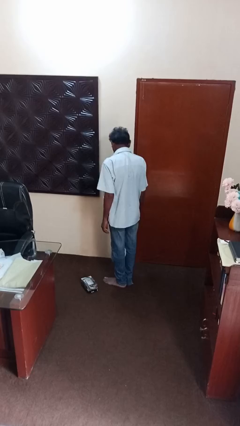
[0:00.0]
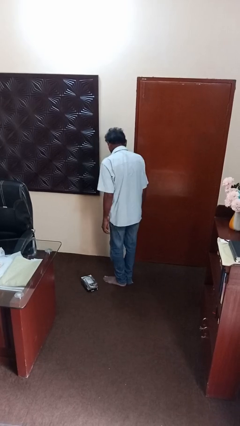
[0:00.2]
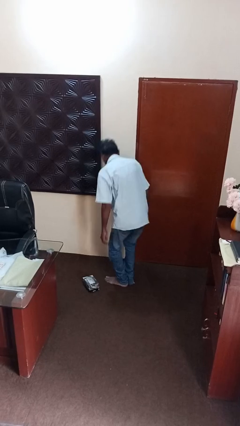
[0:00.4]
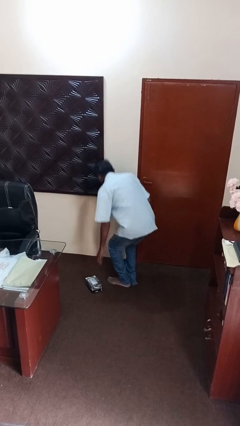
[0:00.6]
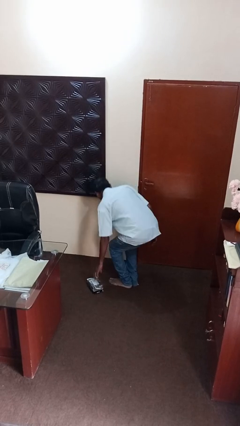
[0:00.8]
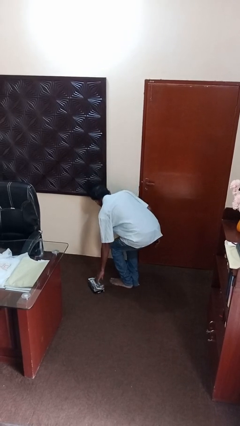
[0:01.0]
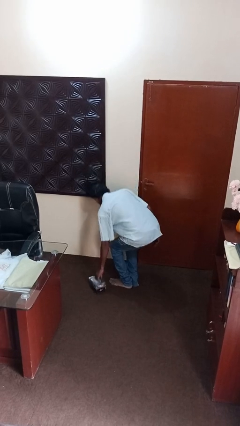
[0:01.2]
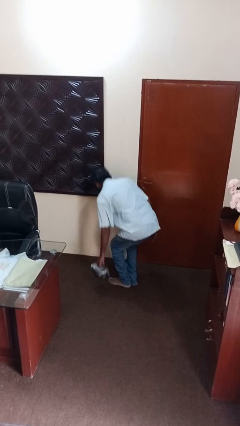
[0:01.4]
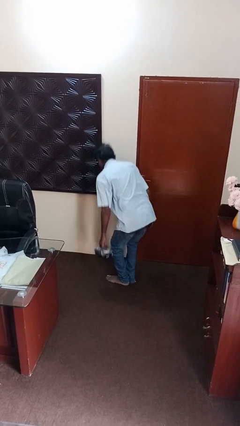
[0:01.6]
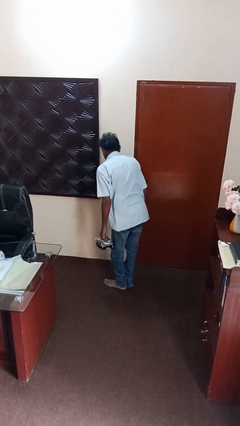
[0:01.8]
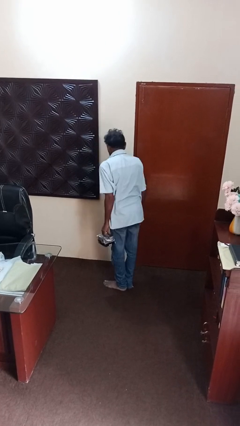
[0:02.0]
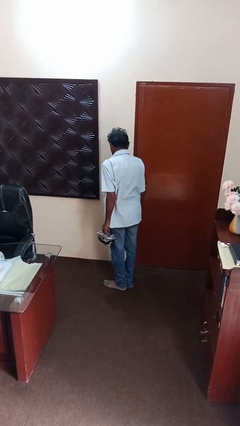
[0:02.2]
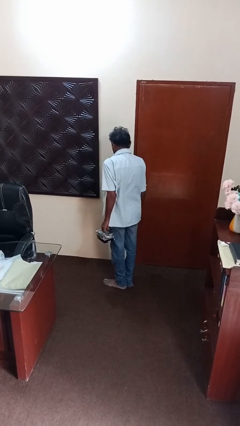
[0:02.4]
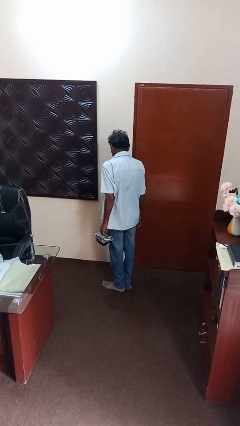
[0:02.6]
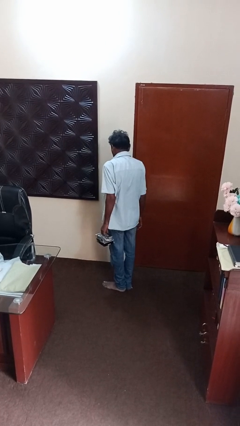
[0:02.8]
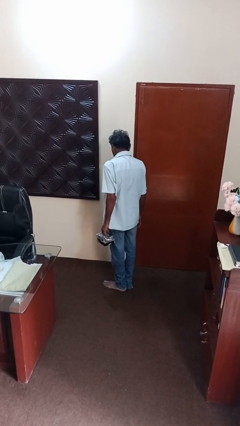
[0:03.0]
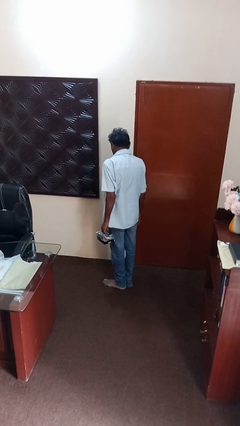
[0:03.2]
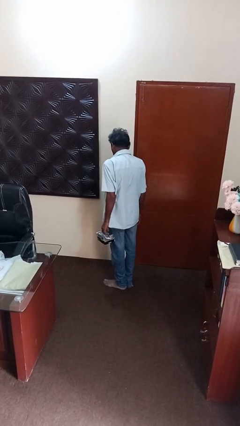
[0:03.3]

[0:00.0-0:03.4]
person picks up object from floor

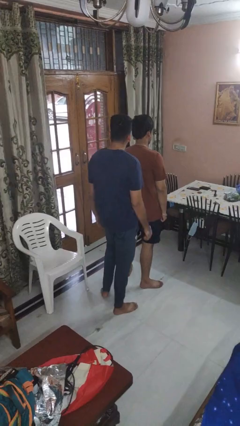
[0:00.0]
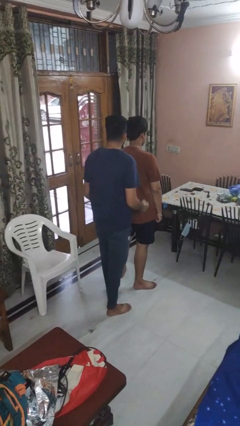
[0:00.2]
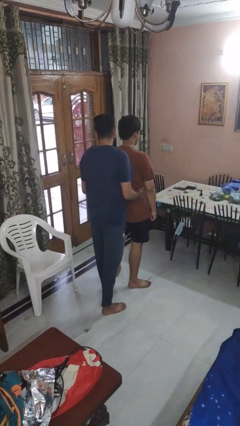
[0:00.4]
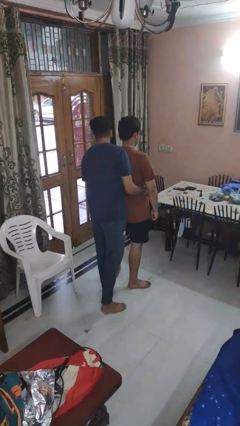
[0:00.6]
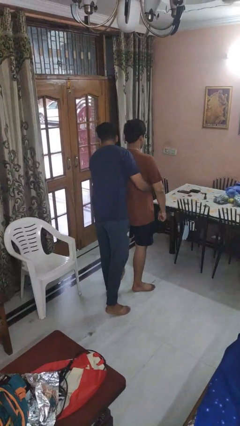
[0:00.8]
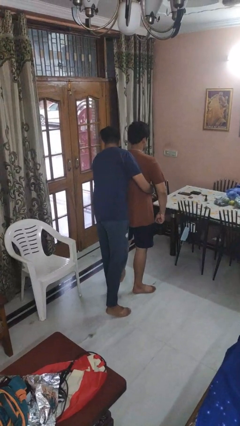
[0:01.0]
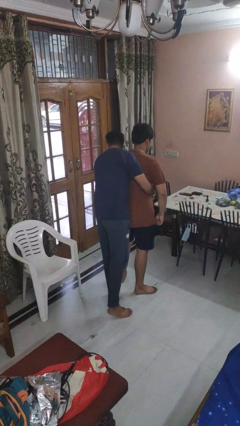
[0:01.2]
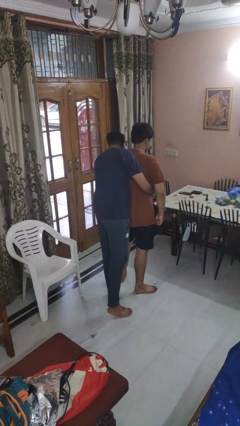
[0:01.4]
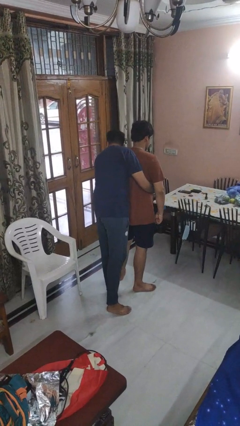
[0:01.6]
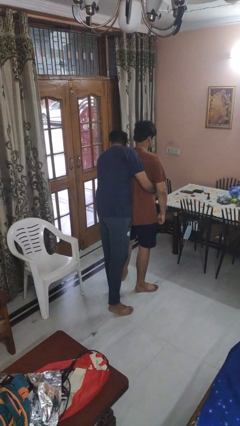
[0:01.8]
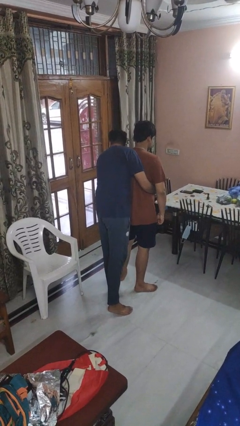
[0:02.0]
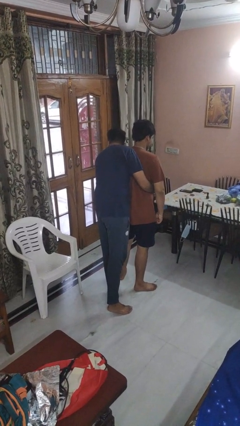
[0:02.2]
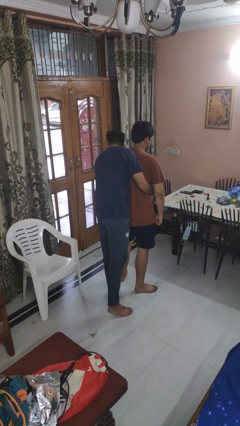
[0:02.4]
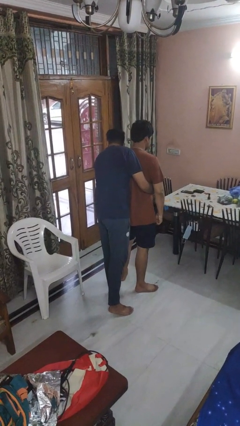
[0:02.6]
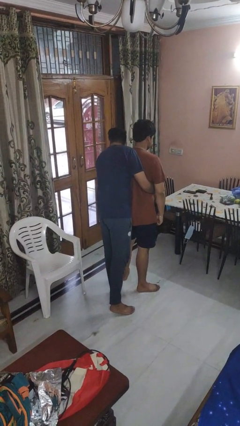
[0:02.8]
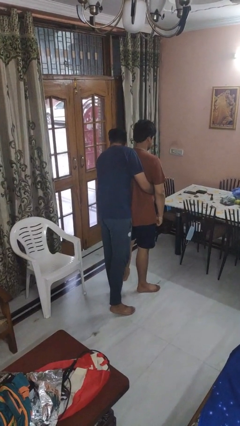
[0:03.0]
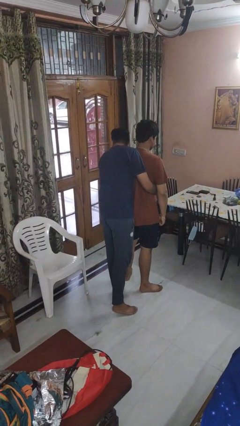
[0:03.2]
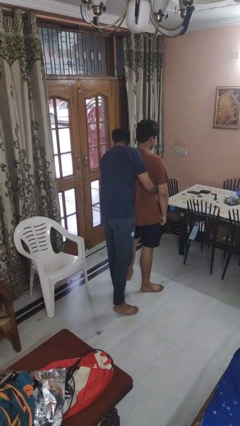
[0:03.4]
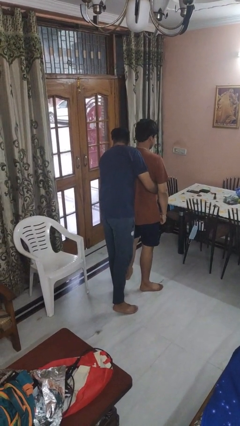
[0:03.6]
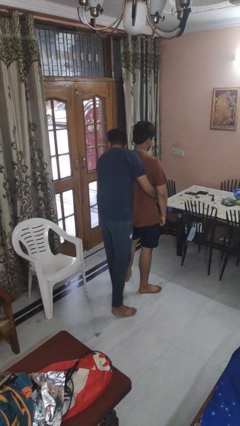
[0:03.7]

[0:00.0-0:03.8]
person hugs person from behind

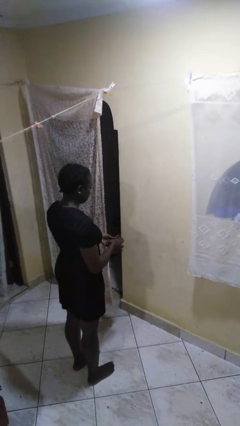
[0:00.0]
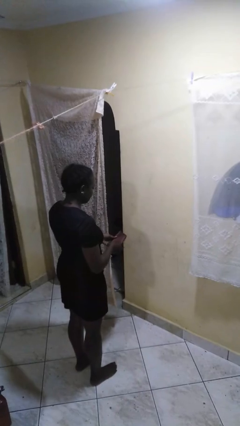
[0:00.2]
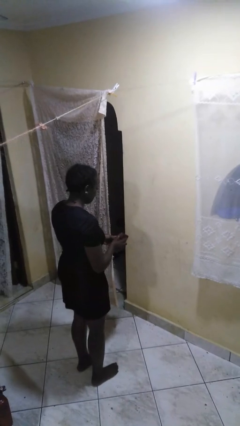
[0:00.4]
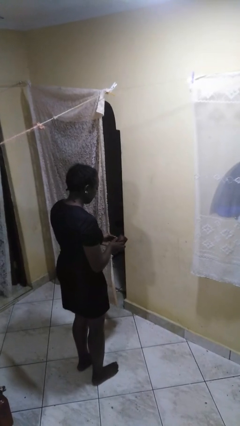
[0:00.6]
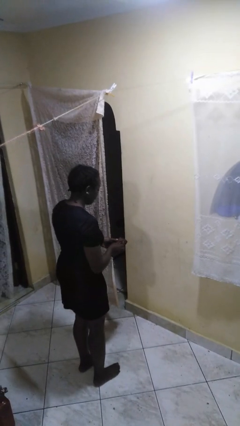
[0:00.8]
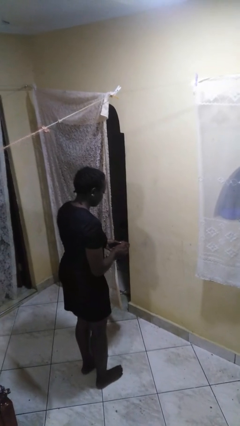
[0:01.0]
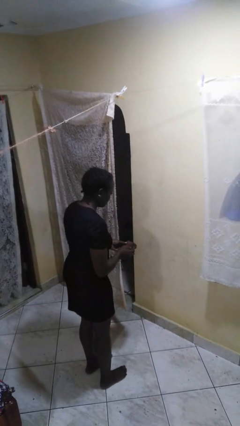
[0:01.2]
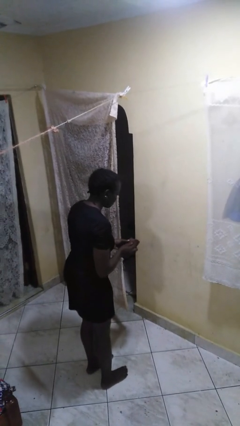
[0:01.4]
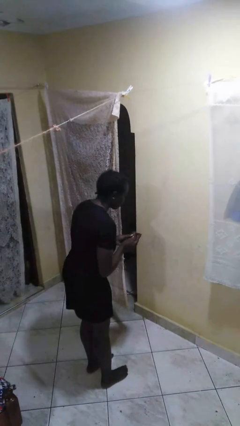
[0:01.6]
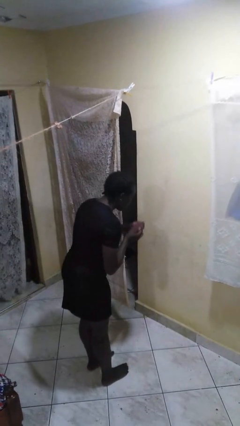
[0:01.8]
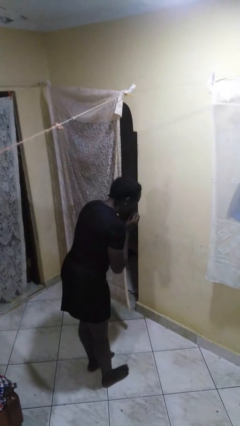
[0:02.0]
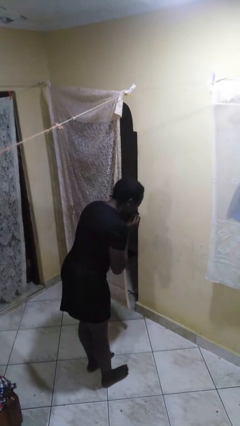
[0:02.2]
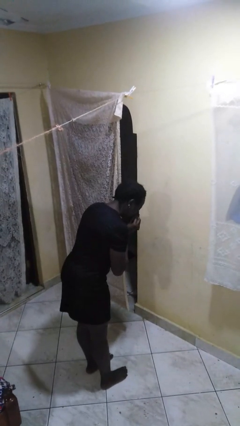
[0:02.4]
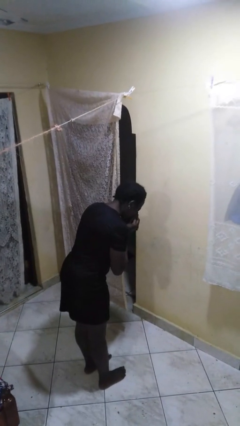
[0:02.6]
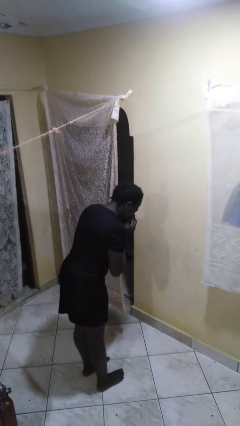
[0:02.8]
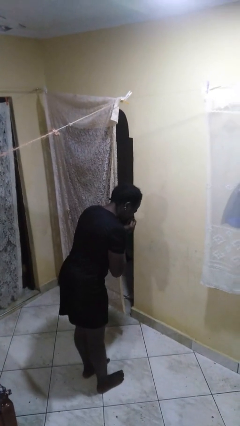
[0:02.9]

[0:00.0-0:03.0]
person blows nose

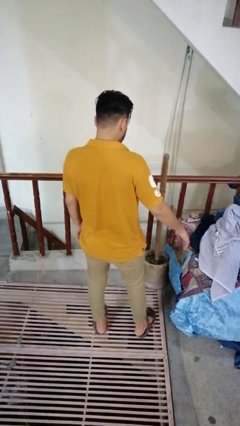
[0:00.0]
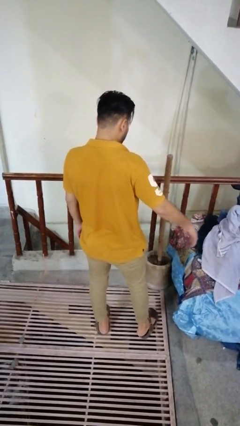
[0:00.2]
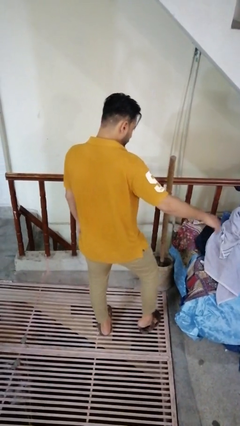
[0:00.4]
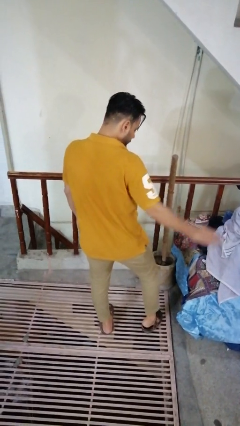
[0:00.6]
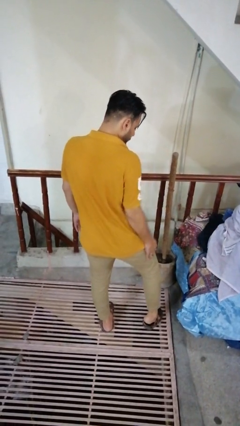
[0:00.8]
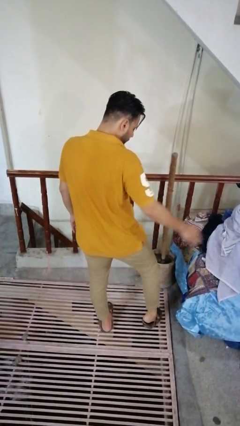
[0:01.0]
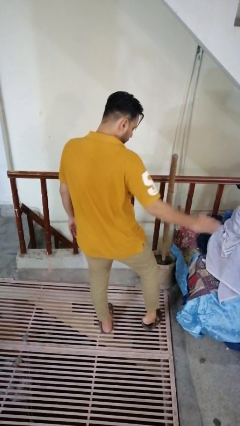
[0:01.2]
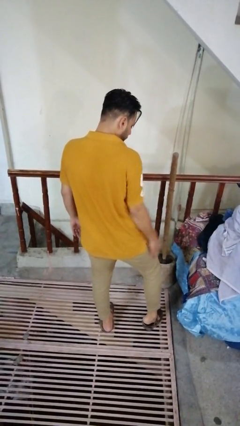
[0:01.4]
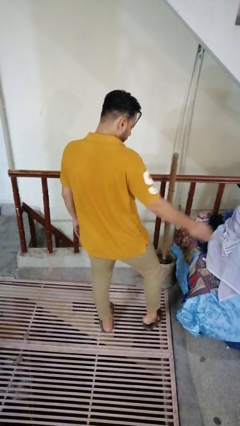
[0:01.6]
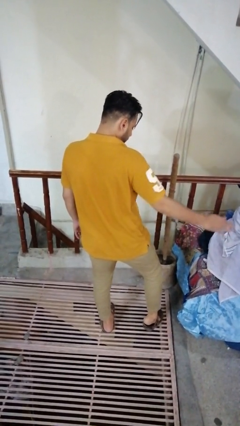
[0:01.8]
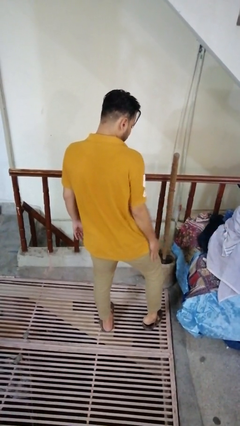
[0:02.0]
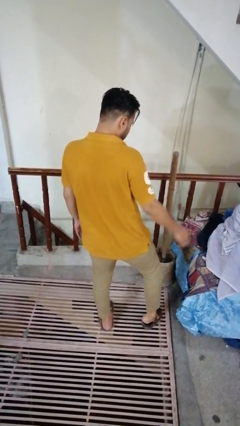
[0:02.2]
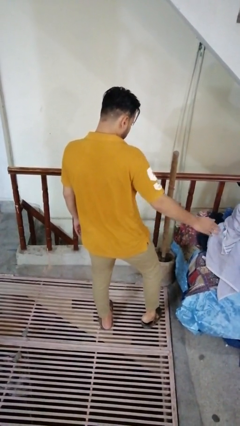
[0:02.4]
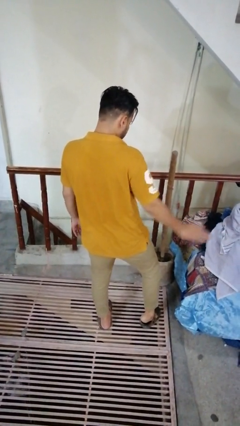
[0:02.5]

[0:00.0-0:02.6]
person slaps hands on thighs

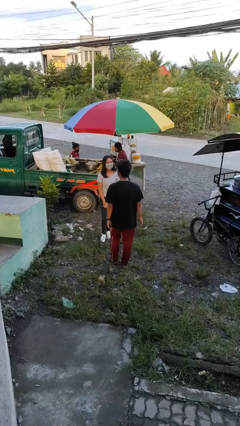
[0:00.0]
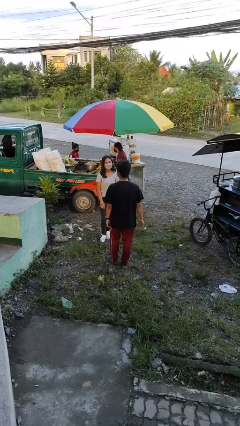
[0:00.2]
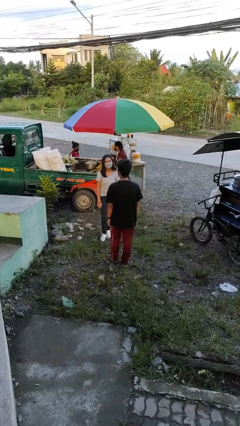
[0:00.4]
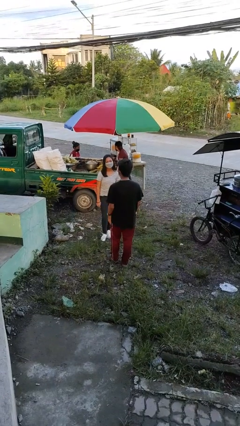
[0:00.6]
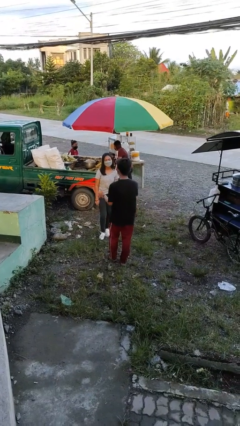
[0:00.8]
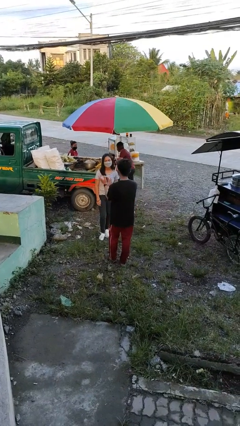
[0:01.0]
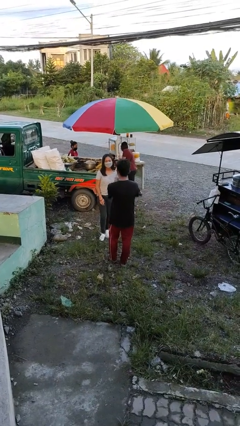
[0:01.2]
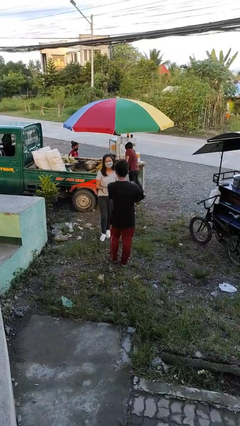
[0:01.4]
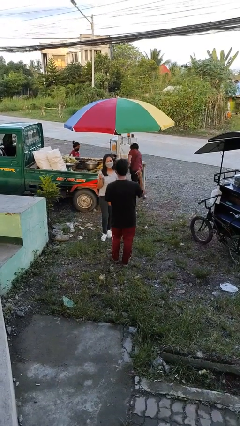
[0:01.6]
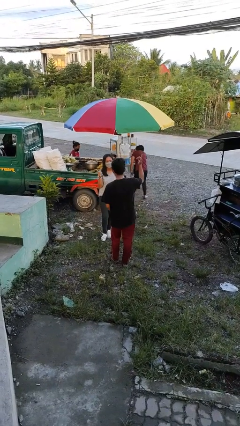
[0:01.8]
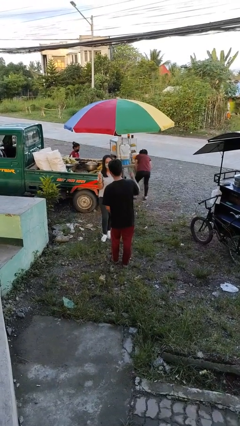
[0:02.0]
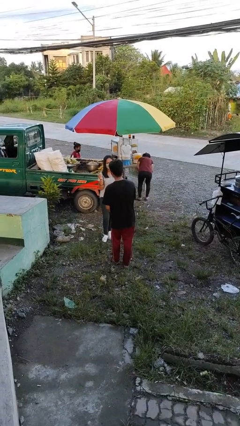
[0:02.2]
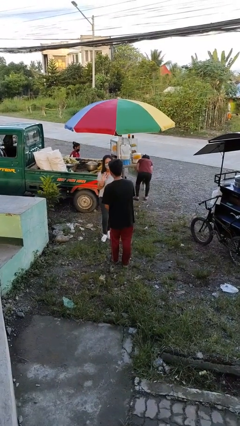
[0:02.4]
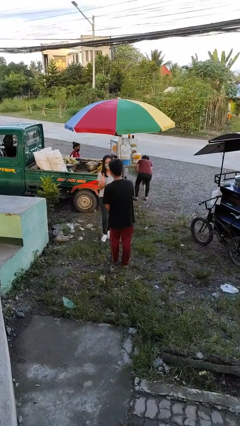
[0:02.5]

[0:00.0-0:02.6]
person talks to person

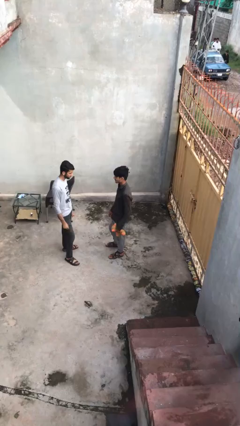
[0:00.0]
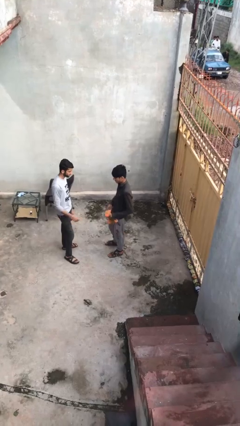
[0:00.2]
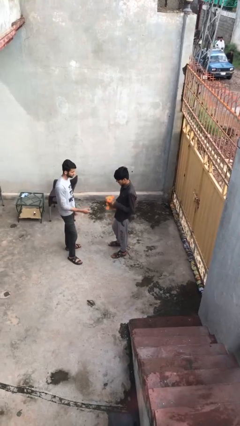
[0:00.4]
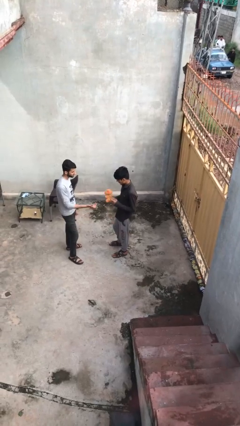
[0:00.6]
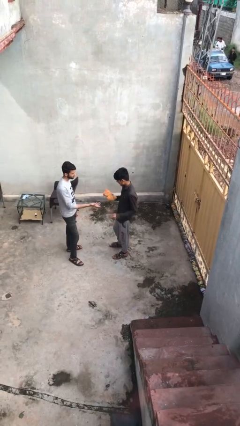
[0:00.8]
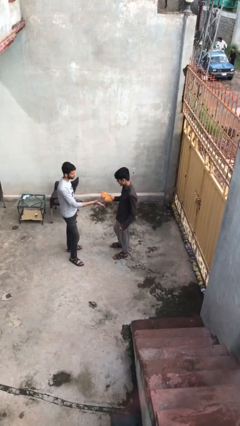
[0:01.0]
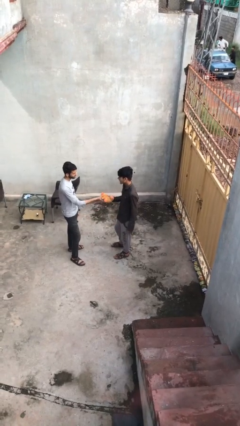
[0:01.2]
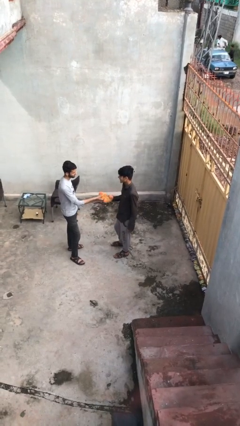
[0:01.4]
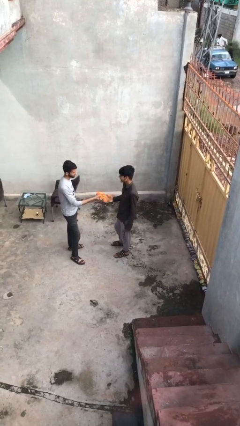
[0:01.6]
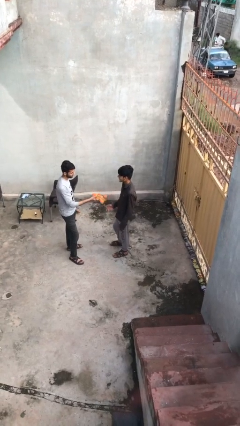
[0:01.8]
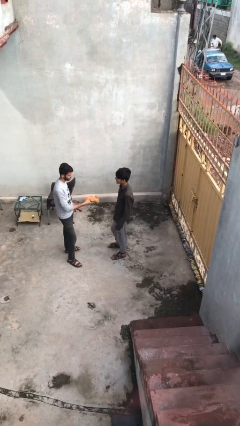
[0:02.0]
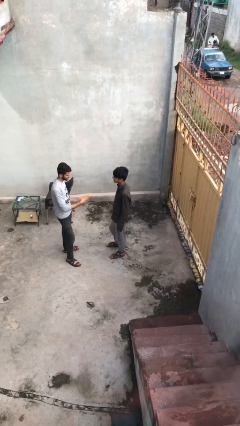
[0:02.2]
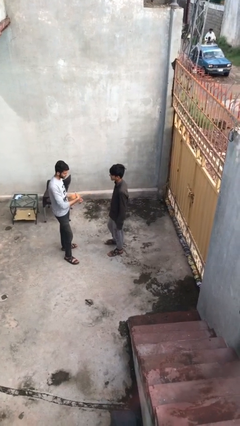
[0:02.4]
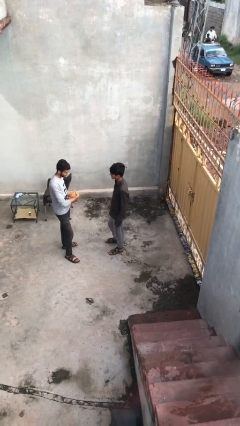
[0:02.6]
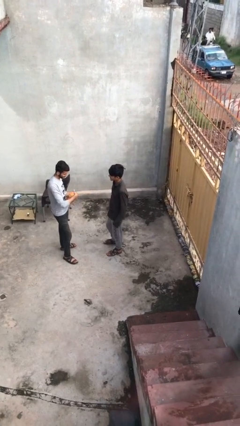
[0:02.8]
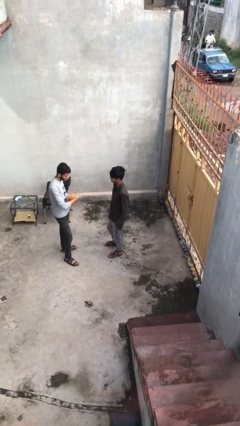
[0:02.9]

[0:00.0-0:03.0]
person transfers object to person
